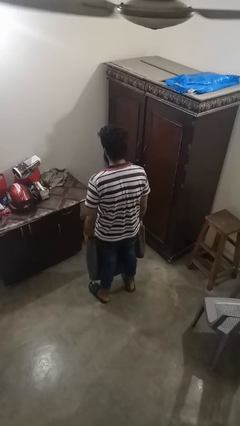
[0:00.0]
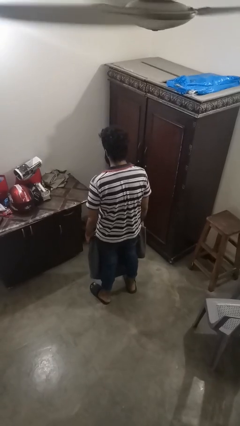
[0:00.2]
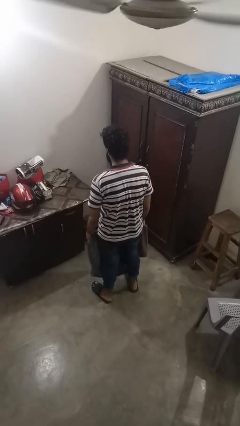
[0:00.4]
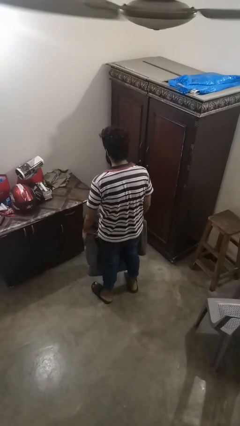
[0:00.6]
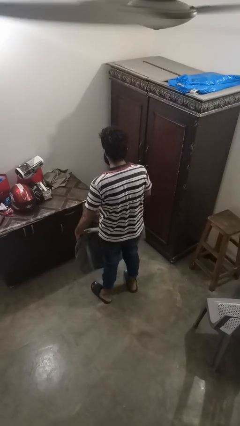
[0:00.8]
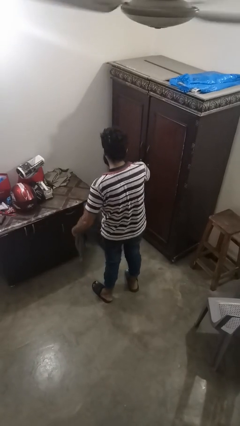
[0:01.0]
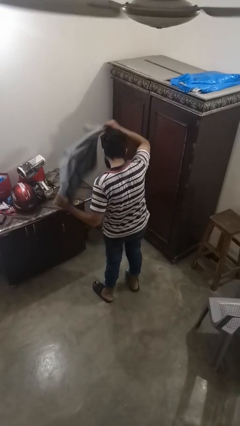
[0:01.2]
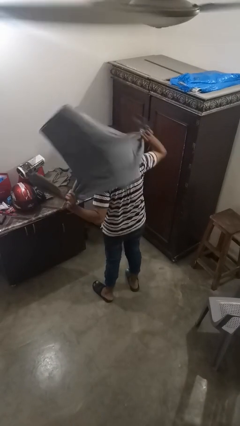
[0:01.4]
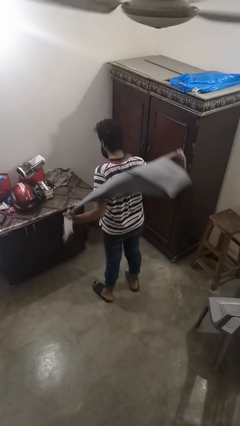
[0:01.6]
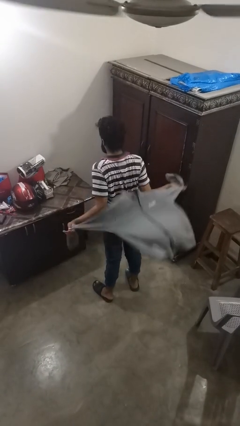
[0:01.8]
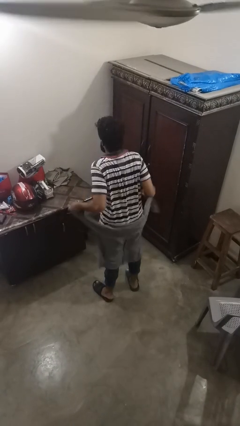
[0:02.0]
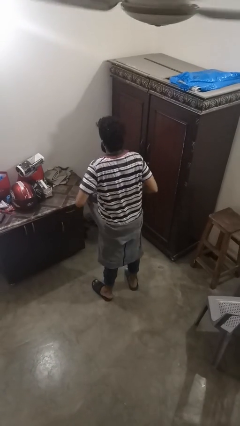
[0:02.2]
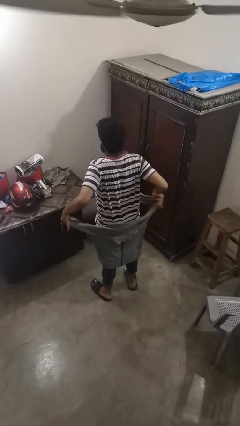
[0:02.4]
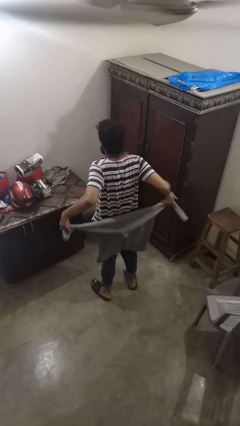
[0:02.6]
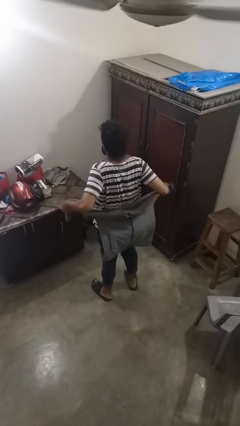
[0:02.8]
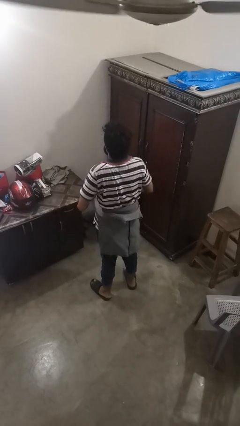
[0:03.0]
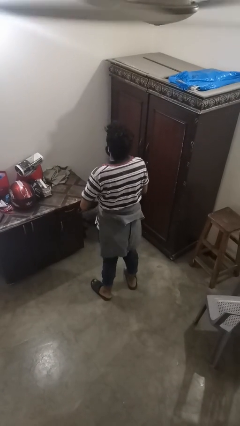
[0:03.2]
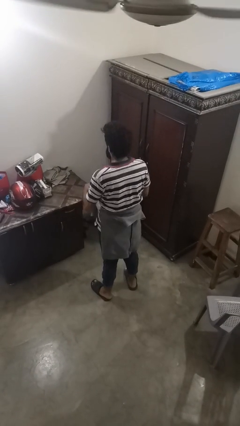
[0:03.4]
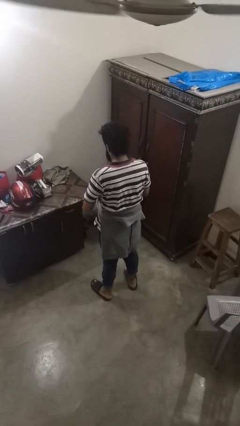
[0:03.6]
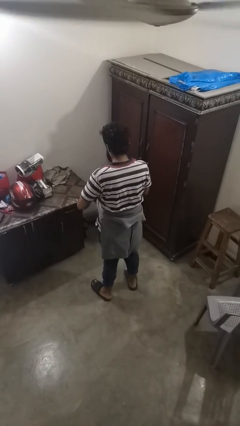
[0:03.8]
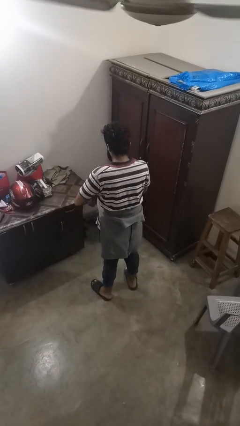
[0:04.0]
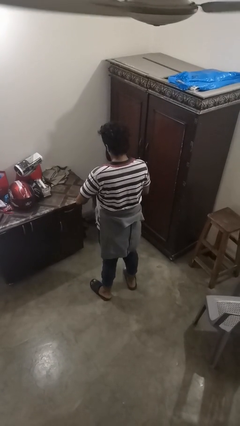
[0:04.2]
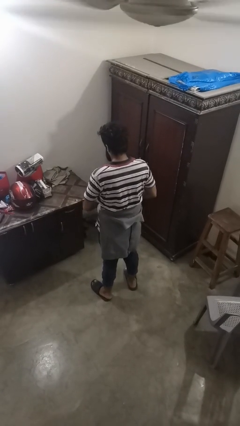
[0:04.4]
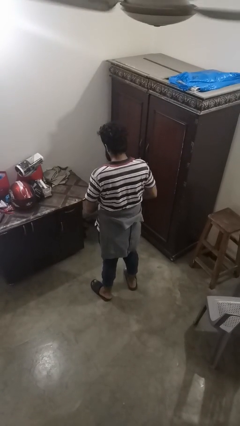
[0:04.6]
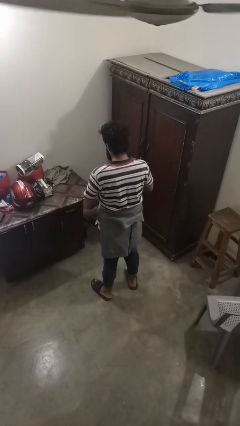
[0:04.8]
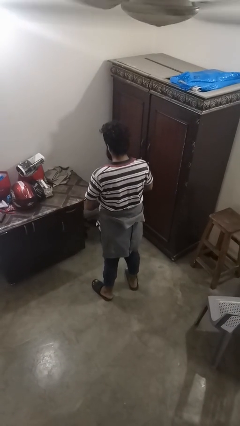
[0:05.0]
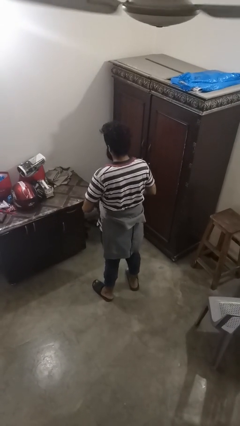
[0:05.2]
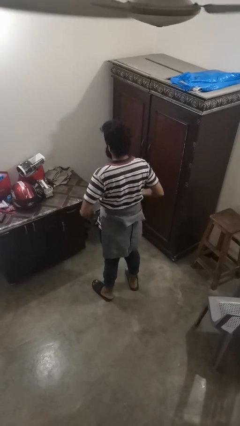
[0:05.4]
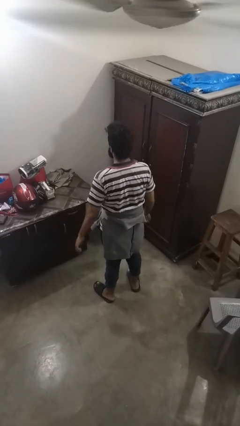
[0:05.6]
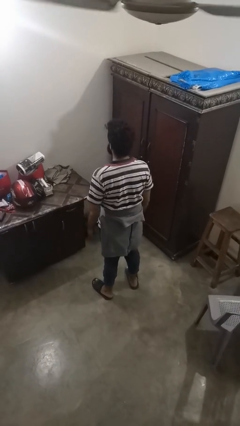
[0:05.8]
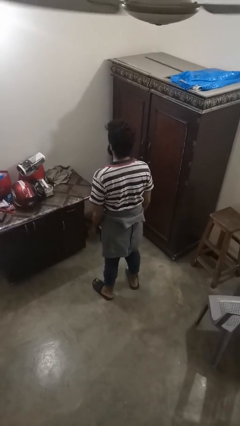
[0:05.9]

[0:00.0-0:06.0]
person ties jacket around waist

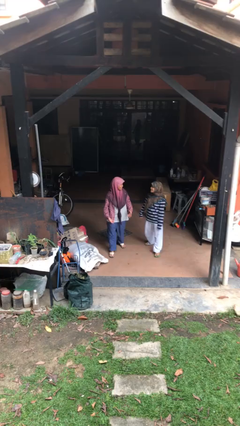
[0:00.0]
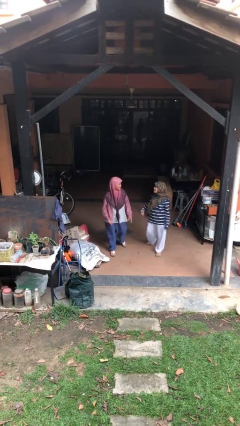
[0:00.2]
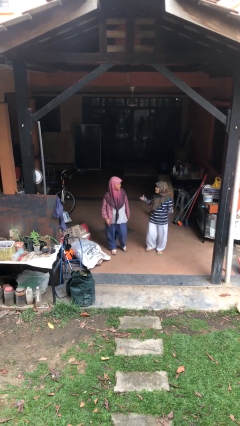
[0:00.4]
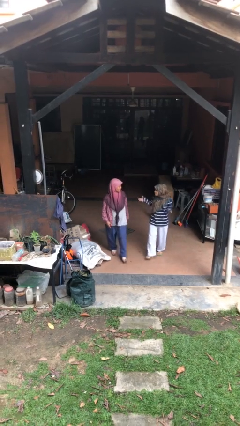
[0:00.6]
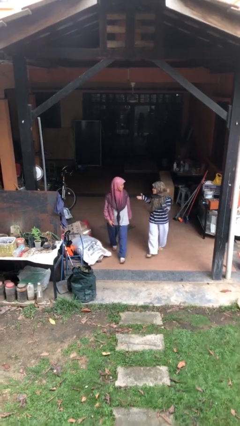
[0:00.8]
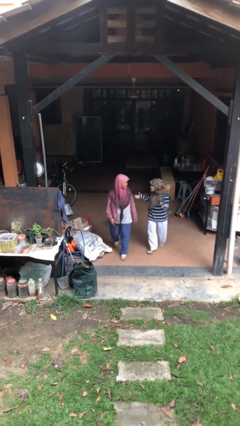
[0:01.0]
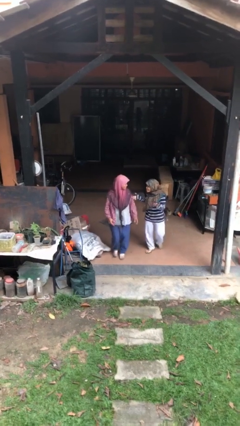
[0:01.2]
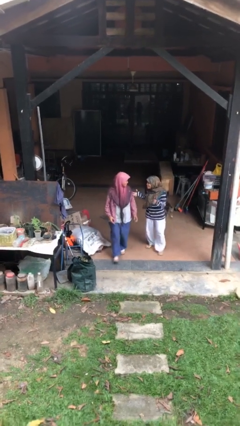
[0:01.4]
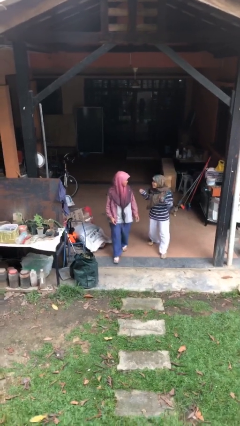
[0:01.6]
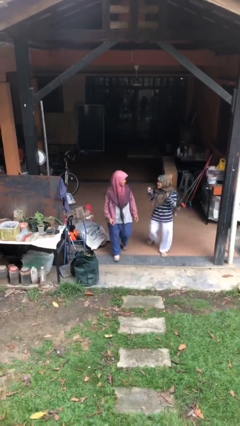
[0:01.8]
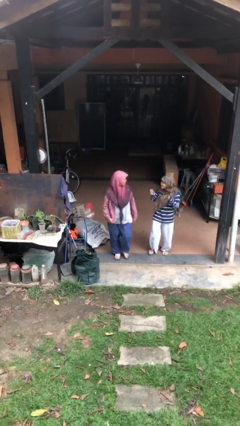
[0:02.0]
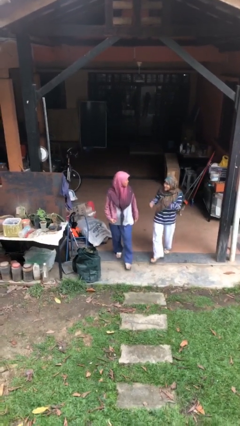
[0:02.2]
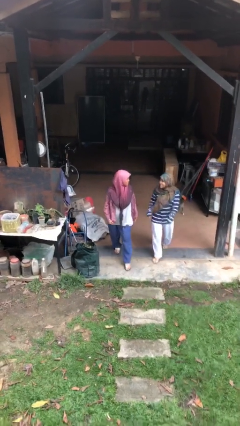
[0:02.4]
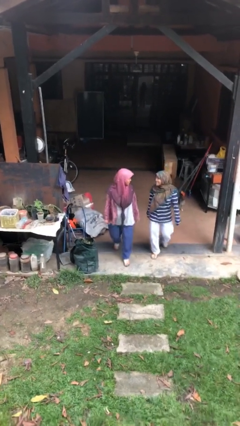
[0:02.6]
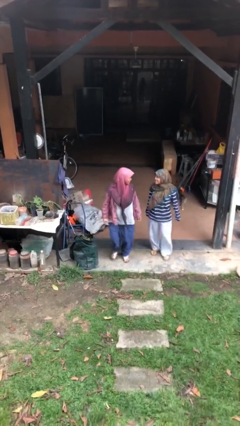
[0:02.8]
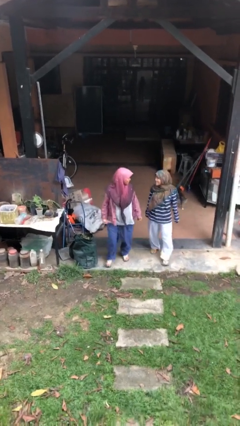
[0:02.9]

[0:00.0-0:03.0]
person talks to person

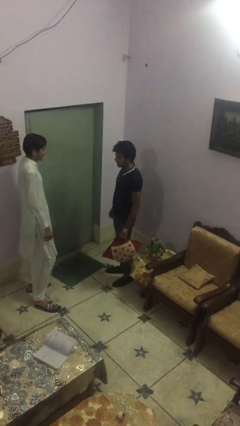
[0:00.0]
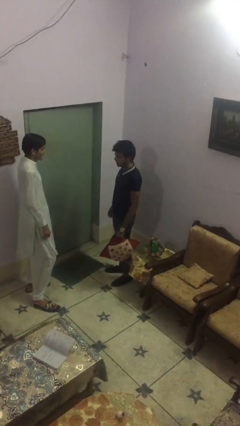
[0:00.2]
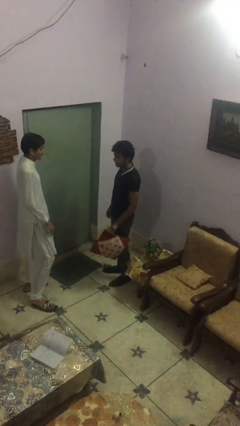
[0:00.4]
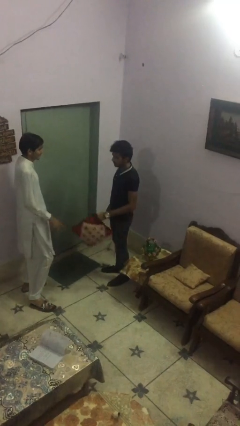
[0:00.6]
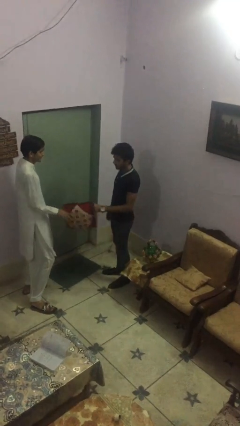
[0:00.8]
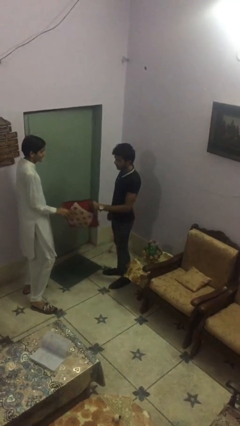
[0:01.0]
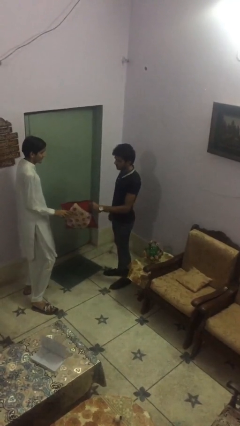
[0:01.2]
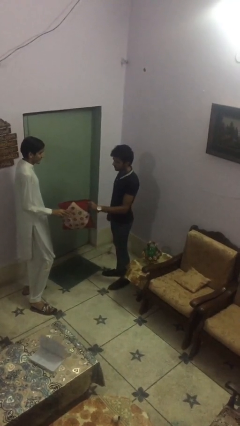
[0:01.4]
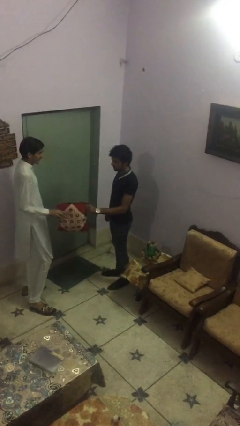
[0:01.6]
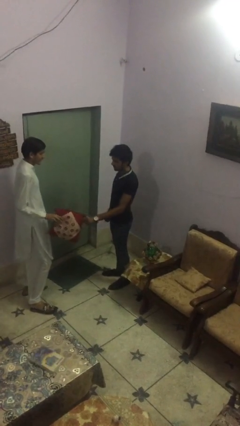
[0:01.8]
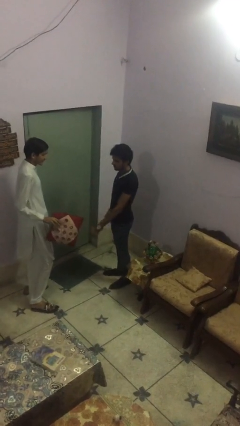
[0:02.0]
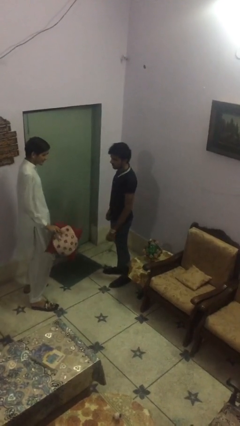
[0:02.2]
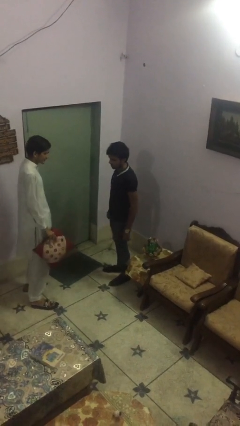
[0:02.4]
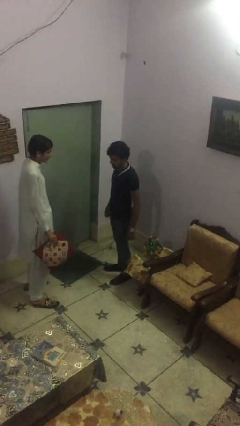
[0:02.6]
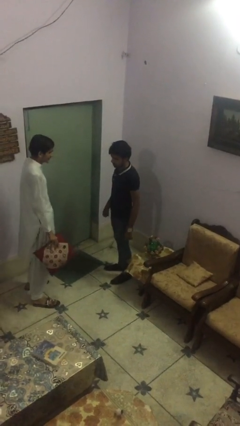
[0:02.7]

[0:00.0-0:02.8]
person transfers object to person

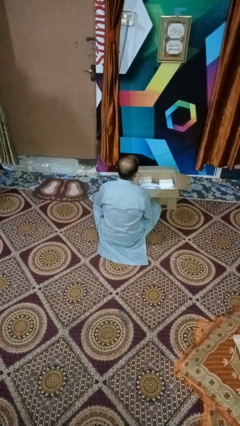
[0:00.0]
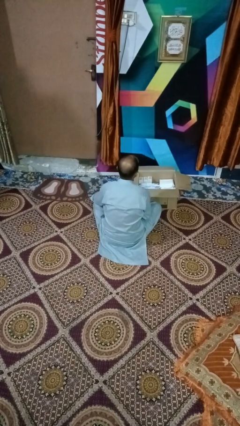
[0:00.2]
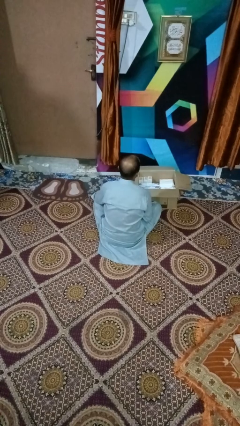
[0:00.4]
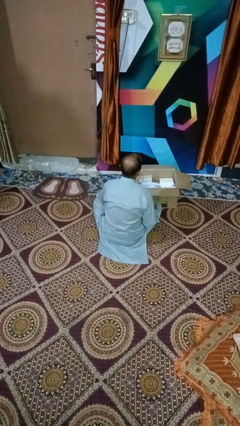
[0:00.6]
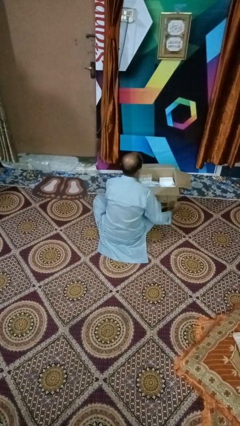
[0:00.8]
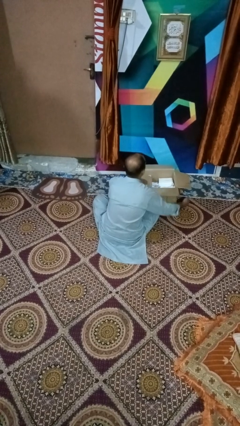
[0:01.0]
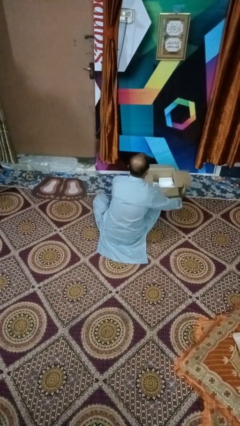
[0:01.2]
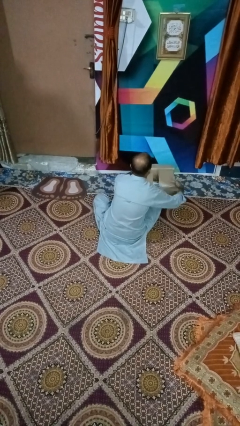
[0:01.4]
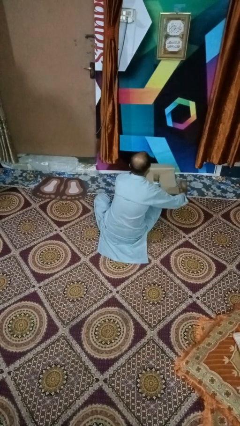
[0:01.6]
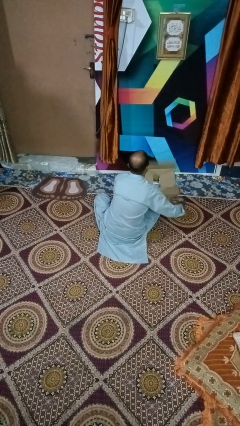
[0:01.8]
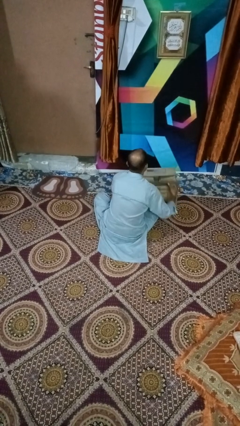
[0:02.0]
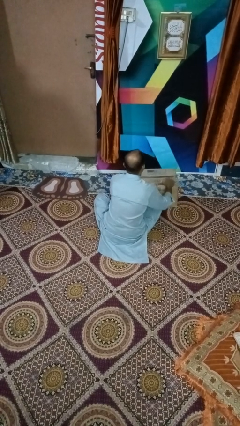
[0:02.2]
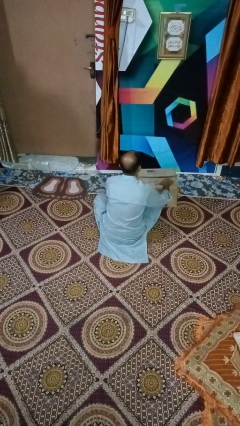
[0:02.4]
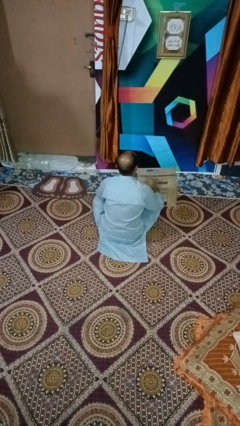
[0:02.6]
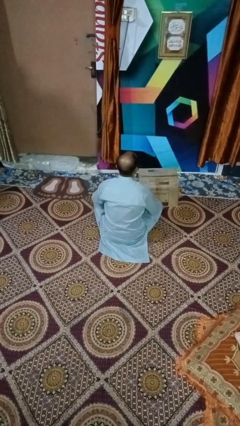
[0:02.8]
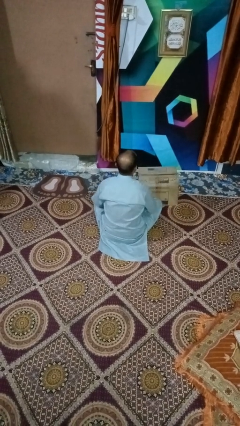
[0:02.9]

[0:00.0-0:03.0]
person closes box

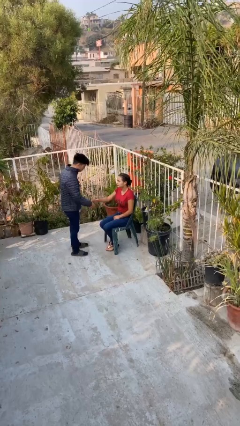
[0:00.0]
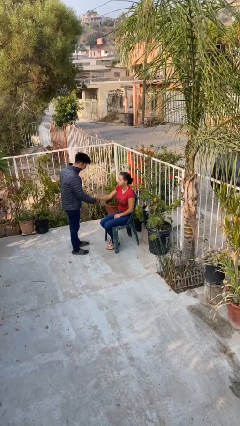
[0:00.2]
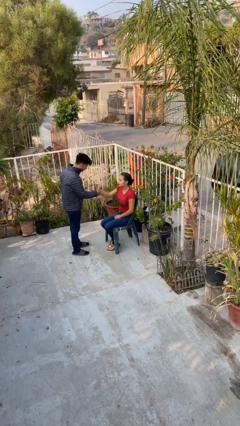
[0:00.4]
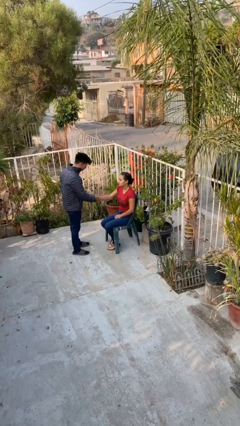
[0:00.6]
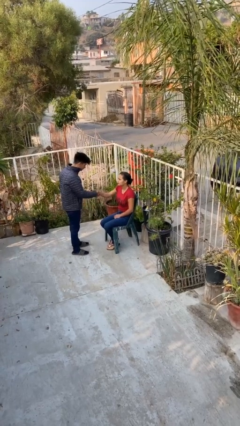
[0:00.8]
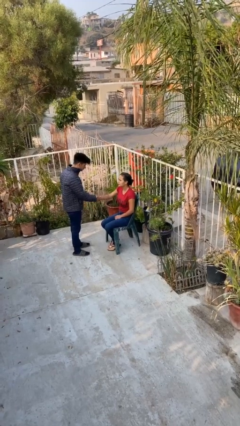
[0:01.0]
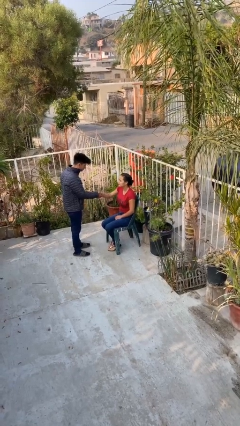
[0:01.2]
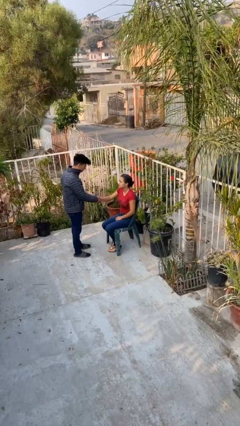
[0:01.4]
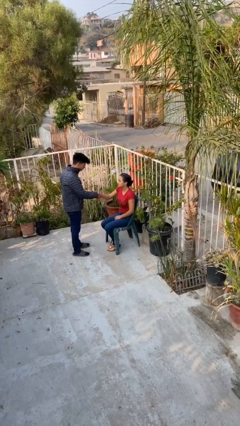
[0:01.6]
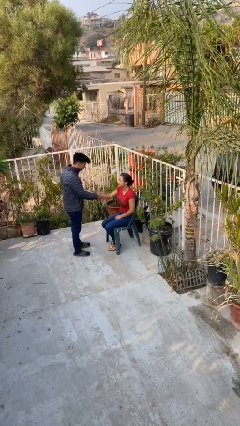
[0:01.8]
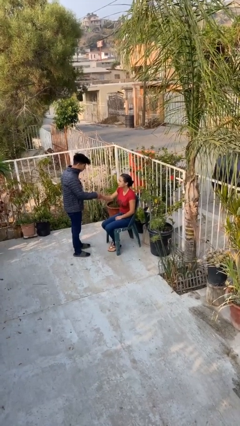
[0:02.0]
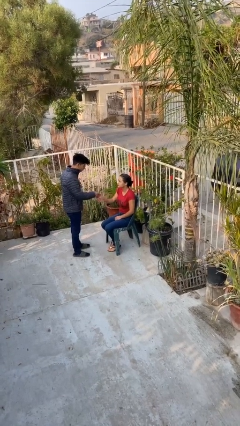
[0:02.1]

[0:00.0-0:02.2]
person shakes hand

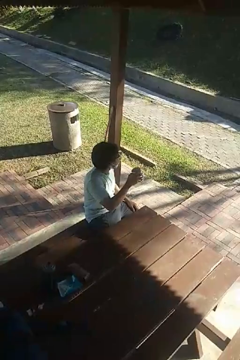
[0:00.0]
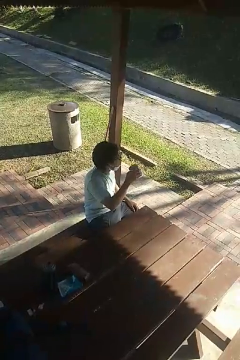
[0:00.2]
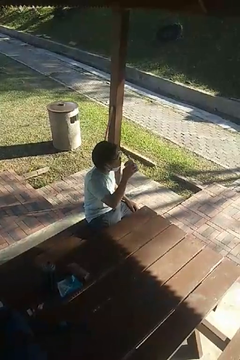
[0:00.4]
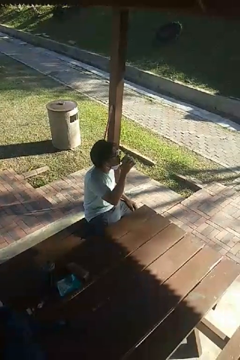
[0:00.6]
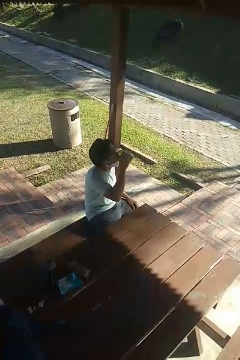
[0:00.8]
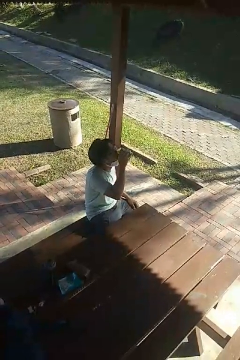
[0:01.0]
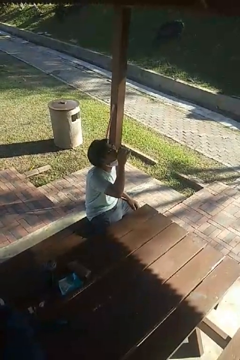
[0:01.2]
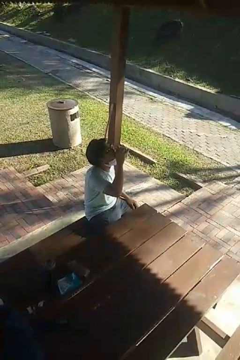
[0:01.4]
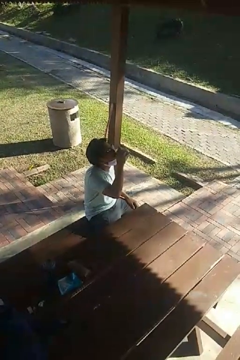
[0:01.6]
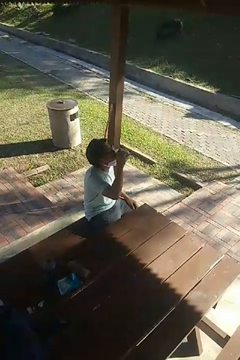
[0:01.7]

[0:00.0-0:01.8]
person drinks from mug
